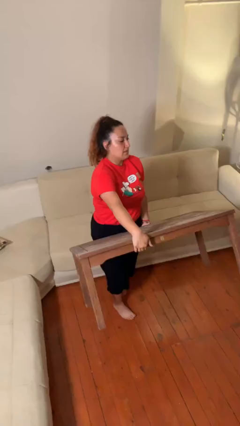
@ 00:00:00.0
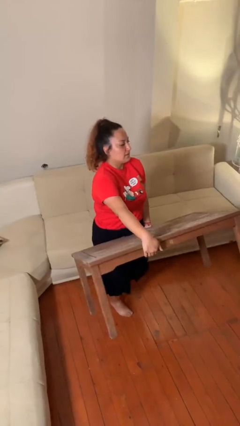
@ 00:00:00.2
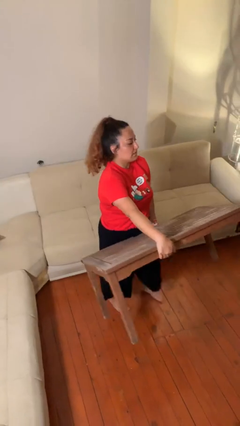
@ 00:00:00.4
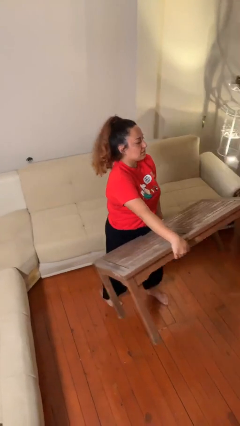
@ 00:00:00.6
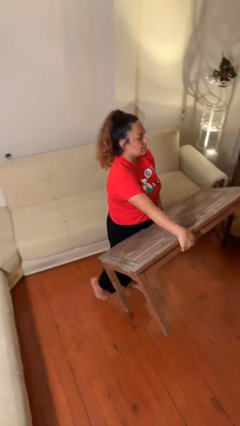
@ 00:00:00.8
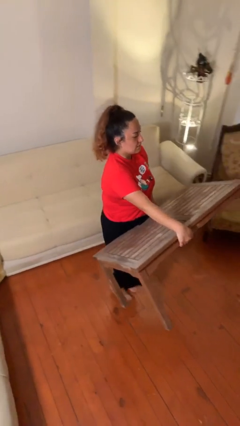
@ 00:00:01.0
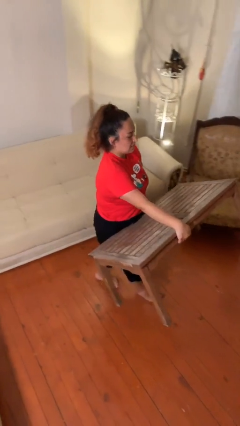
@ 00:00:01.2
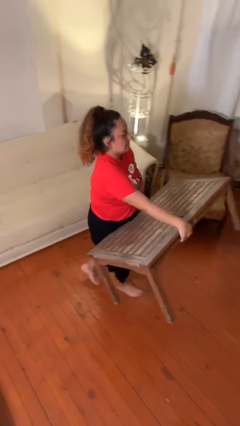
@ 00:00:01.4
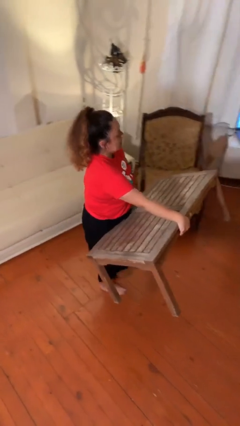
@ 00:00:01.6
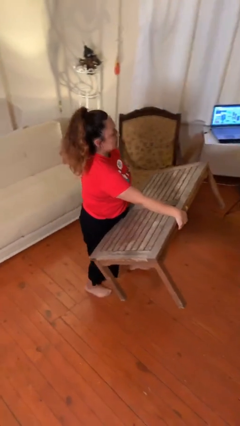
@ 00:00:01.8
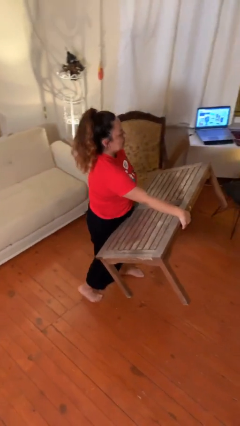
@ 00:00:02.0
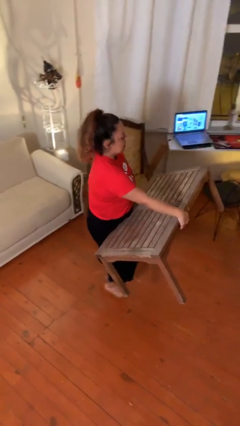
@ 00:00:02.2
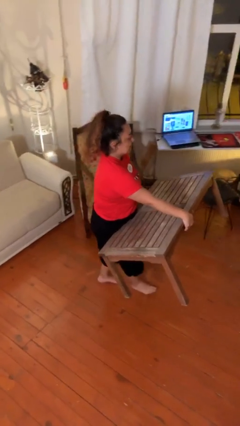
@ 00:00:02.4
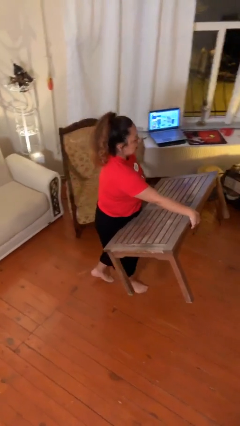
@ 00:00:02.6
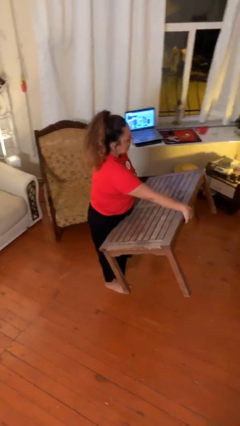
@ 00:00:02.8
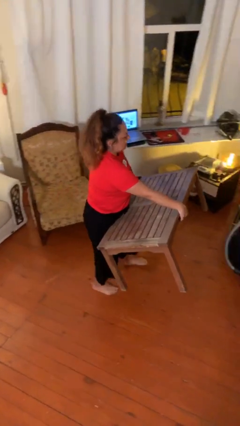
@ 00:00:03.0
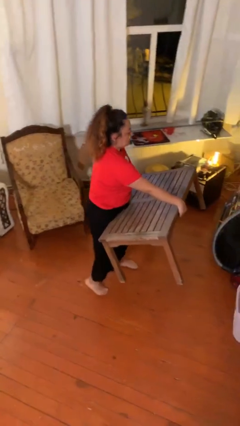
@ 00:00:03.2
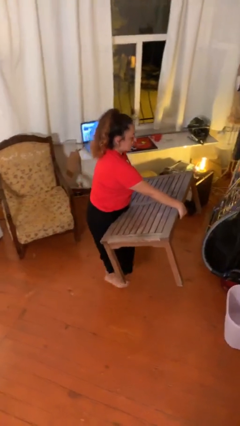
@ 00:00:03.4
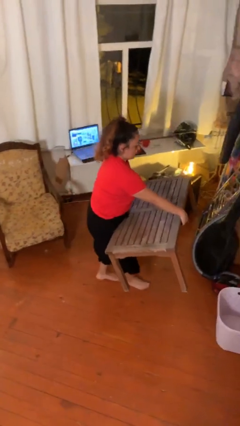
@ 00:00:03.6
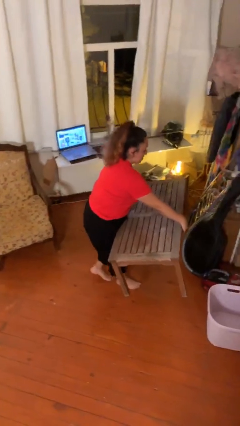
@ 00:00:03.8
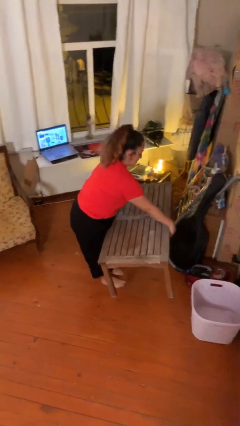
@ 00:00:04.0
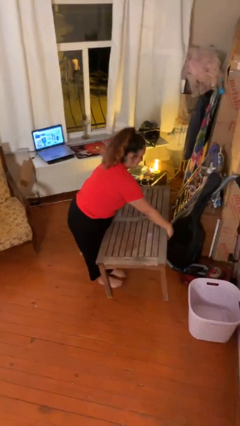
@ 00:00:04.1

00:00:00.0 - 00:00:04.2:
person carries heavy object

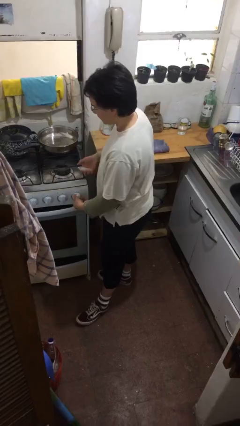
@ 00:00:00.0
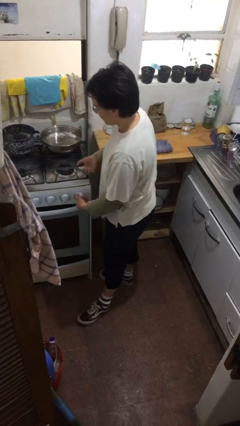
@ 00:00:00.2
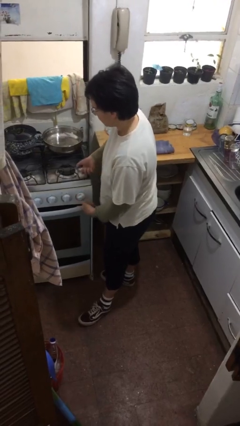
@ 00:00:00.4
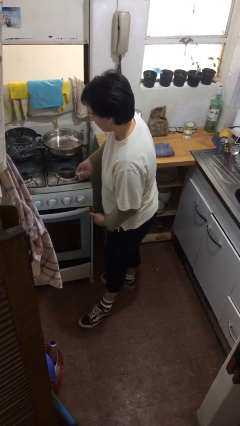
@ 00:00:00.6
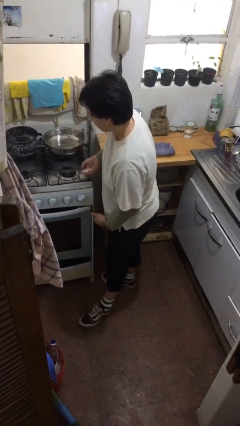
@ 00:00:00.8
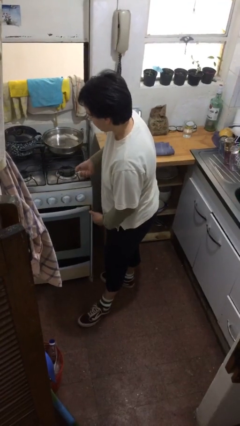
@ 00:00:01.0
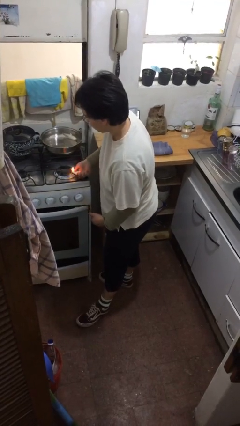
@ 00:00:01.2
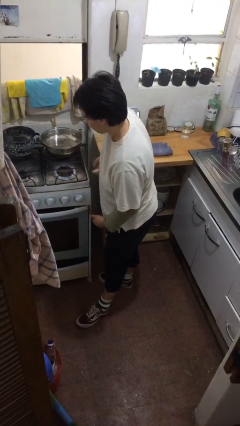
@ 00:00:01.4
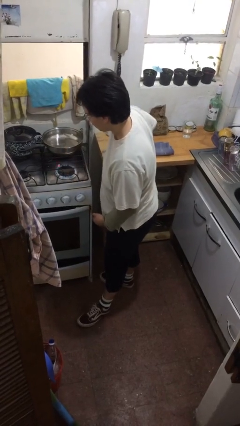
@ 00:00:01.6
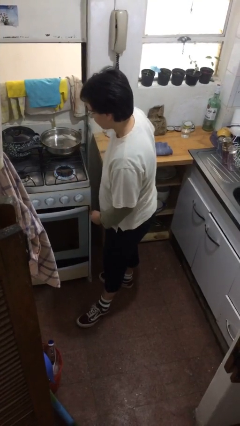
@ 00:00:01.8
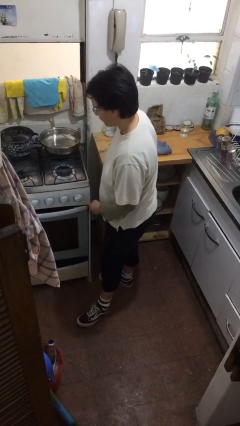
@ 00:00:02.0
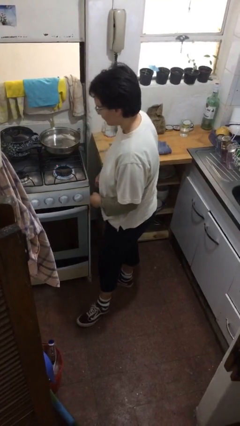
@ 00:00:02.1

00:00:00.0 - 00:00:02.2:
person turns on stovetop

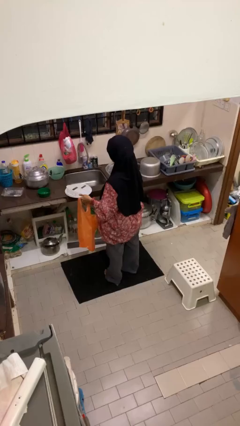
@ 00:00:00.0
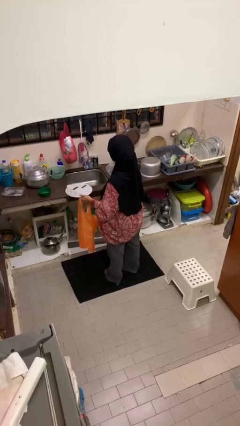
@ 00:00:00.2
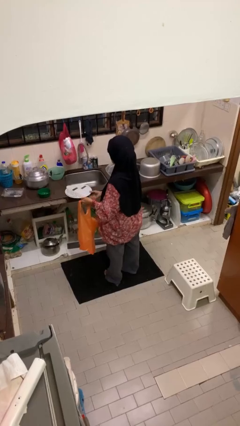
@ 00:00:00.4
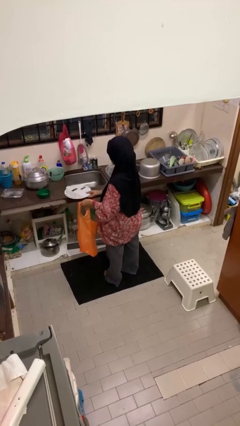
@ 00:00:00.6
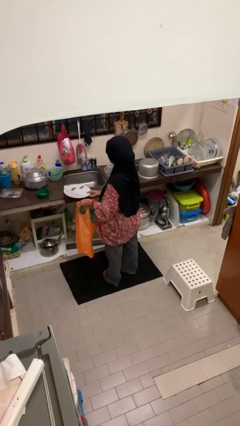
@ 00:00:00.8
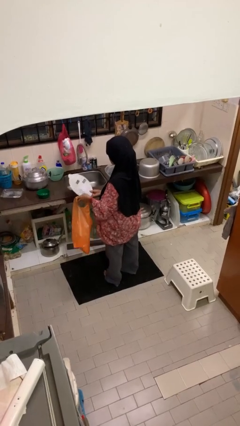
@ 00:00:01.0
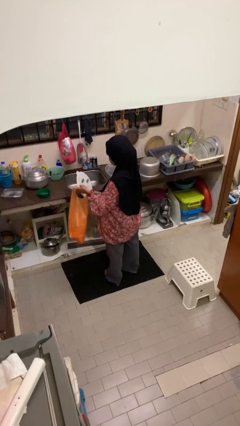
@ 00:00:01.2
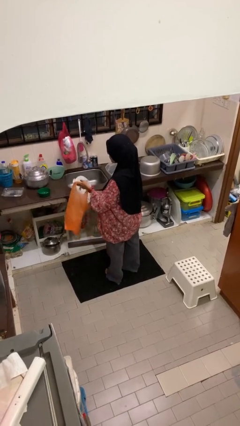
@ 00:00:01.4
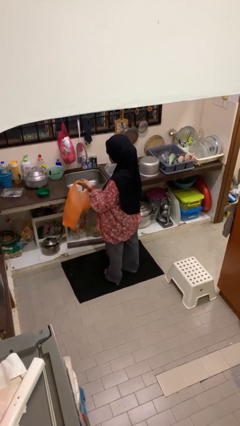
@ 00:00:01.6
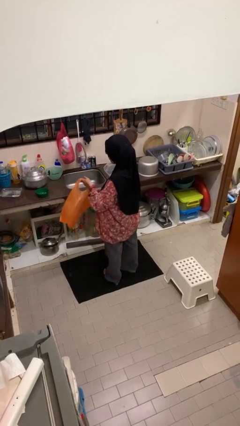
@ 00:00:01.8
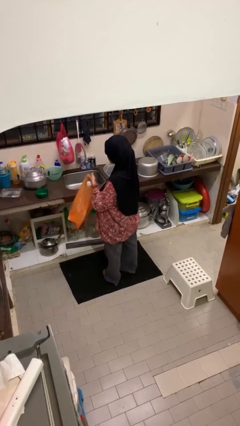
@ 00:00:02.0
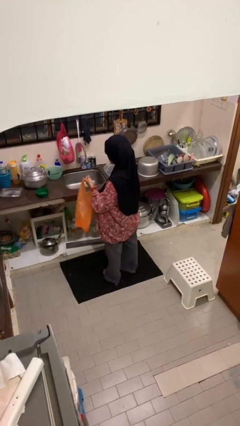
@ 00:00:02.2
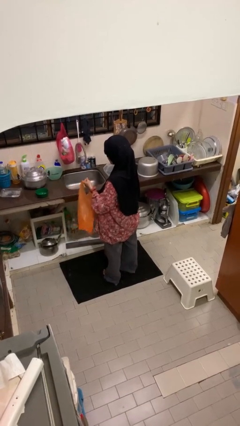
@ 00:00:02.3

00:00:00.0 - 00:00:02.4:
person puts object into bag

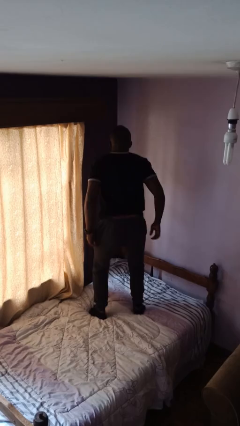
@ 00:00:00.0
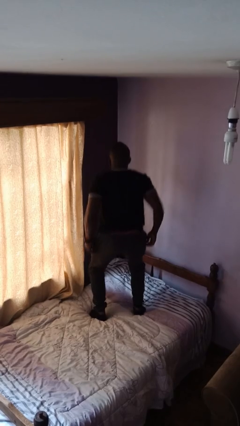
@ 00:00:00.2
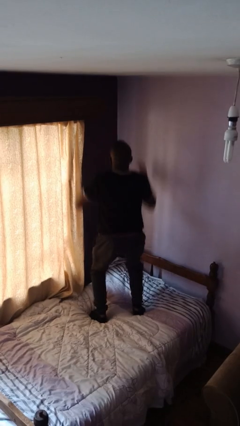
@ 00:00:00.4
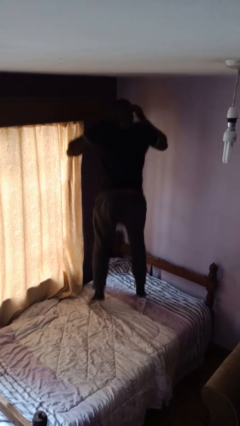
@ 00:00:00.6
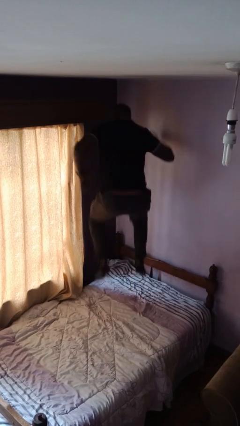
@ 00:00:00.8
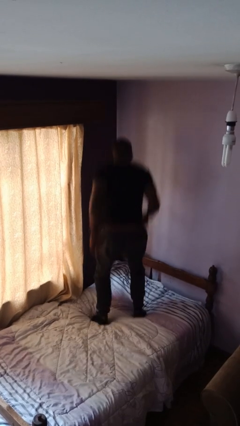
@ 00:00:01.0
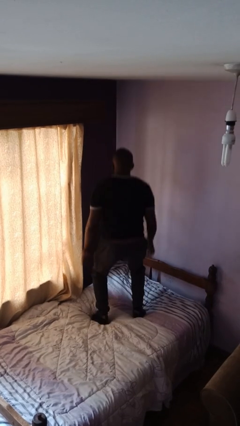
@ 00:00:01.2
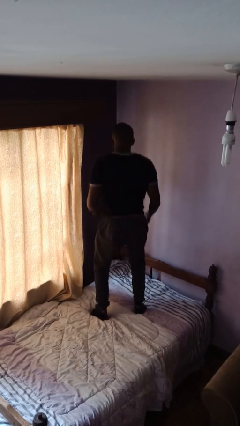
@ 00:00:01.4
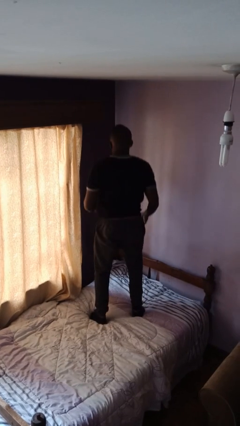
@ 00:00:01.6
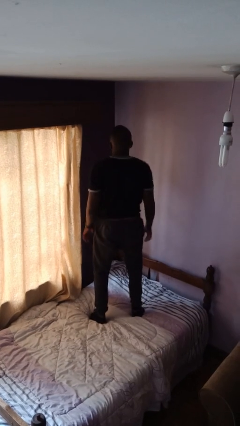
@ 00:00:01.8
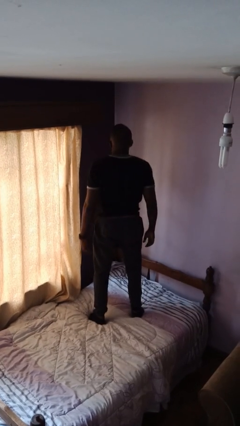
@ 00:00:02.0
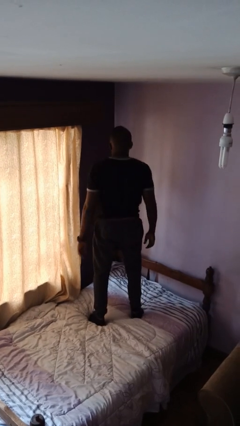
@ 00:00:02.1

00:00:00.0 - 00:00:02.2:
person jumps on bed

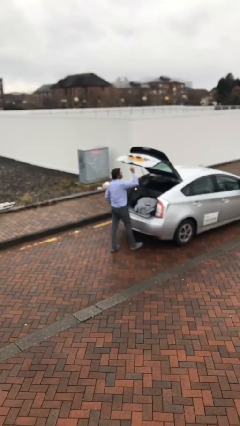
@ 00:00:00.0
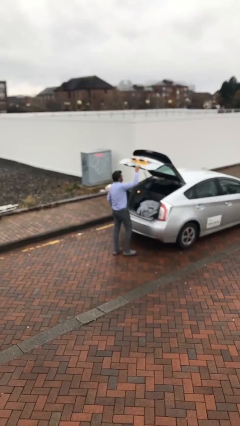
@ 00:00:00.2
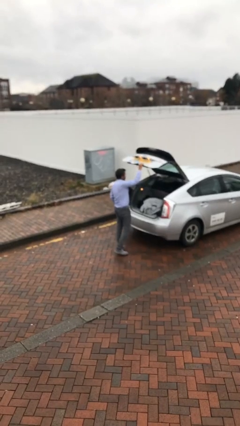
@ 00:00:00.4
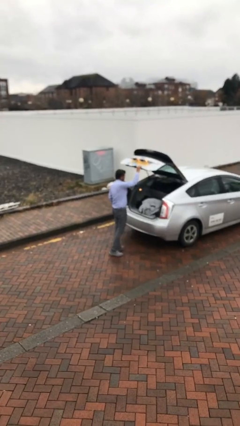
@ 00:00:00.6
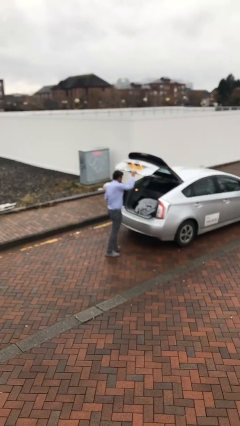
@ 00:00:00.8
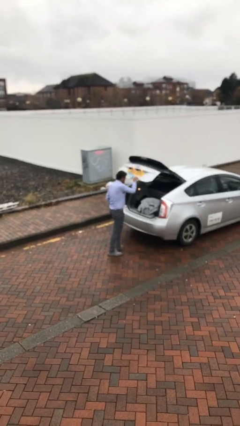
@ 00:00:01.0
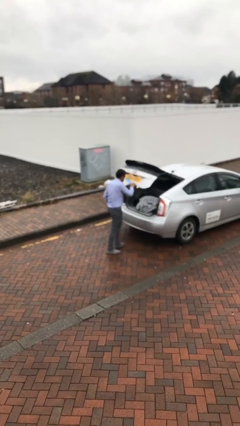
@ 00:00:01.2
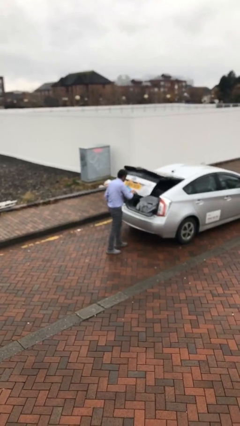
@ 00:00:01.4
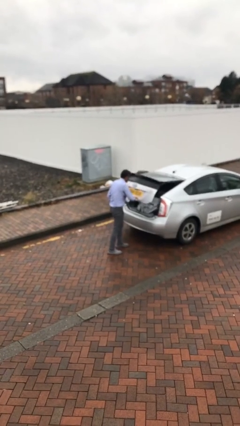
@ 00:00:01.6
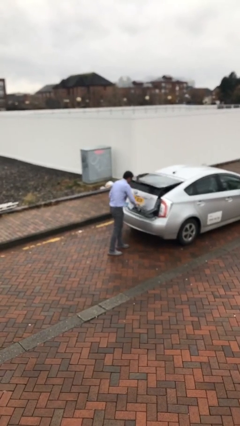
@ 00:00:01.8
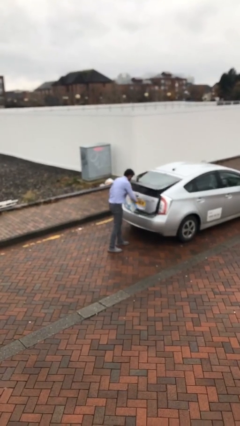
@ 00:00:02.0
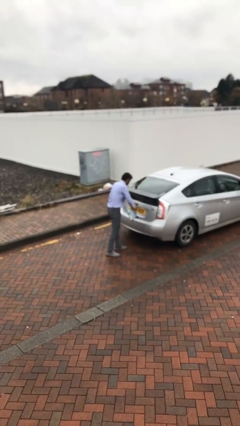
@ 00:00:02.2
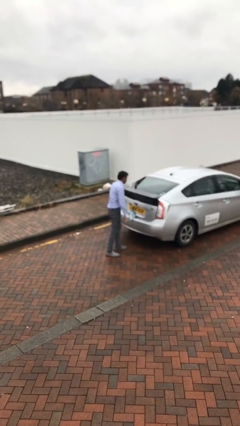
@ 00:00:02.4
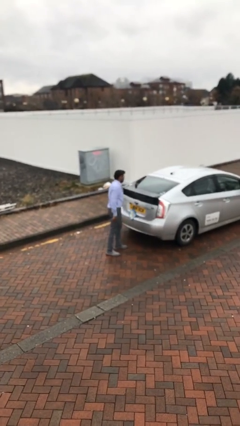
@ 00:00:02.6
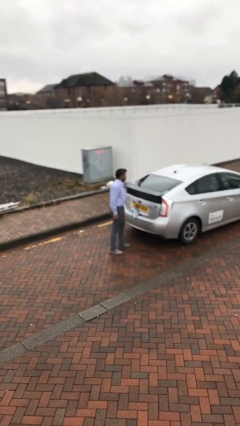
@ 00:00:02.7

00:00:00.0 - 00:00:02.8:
person closes car trunk

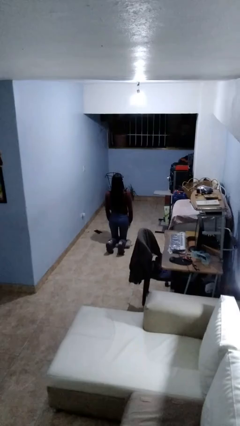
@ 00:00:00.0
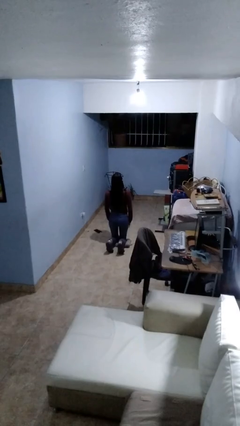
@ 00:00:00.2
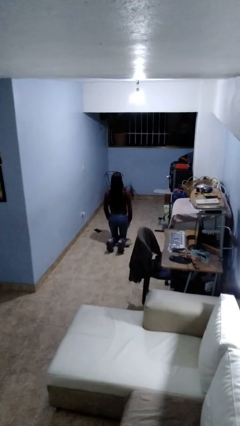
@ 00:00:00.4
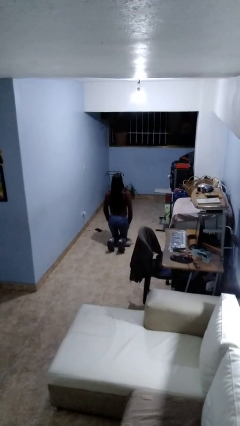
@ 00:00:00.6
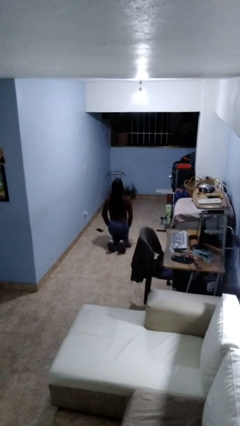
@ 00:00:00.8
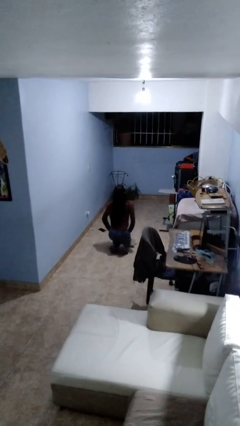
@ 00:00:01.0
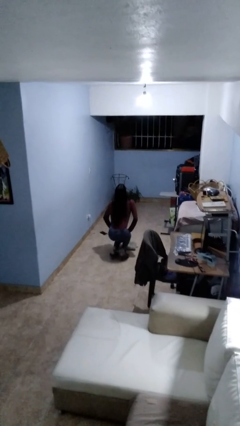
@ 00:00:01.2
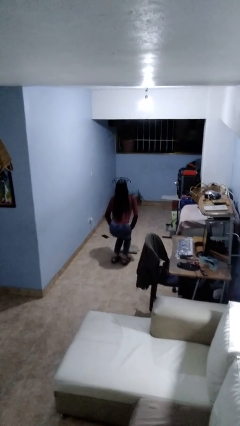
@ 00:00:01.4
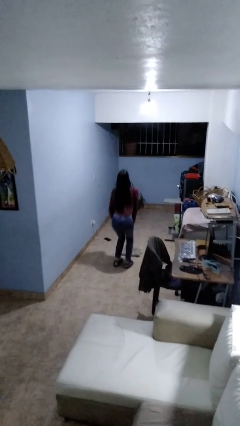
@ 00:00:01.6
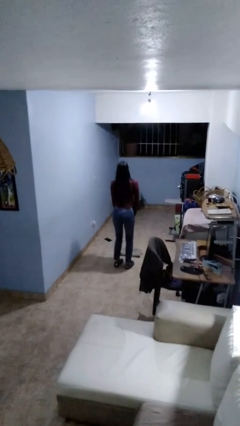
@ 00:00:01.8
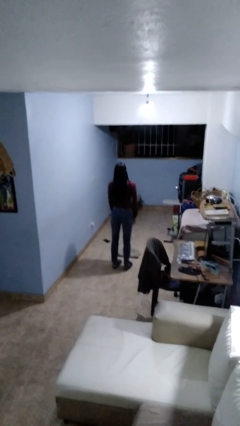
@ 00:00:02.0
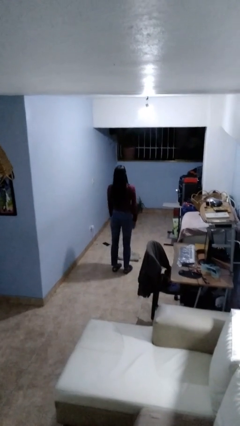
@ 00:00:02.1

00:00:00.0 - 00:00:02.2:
person stands up from floor

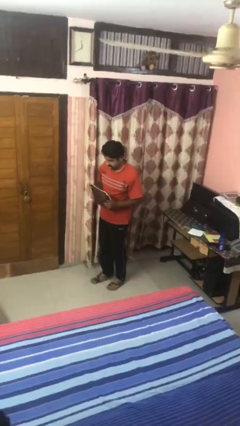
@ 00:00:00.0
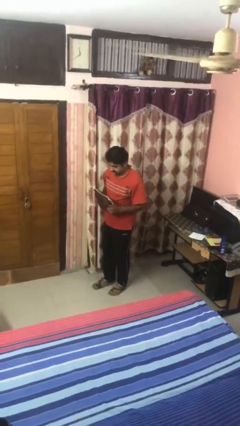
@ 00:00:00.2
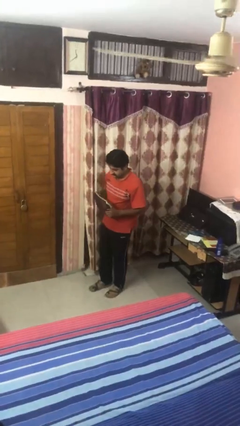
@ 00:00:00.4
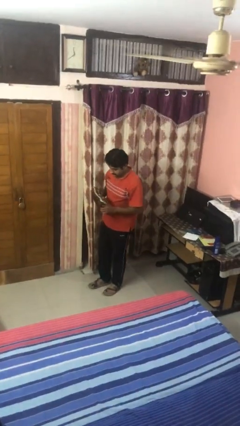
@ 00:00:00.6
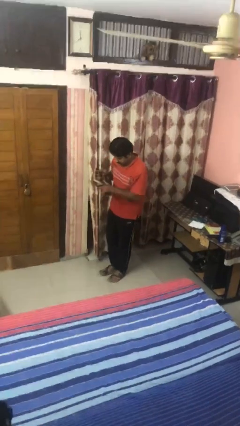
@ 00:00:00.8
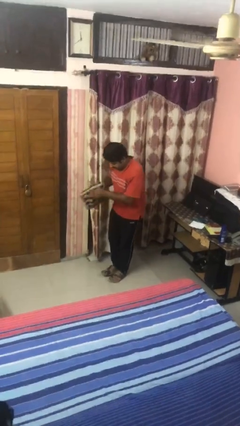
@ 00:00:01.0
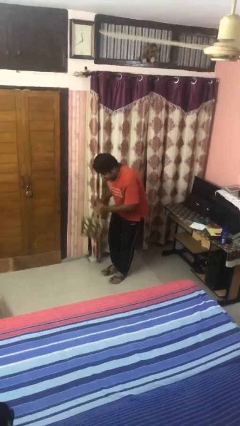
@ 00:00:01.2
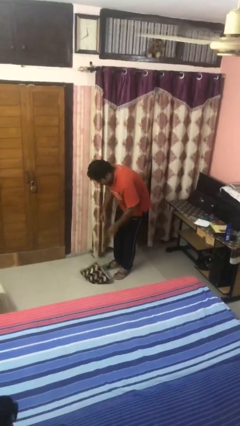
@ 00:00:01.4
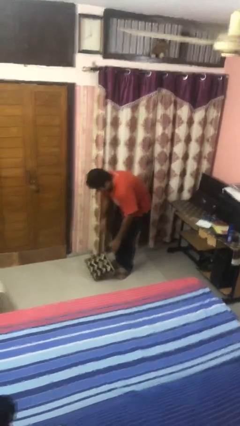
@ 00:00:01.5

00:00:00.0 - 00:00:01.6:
person drops object
